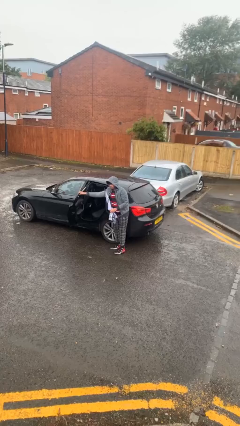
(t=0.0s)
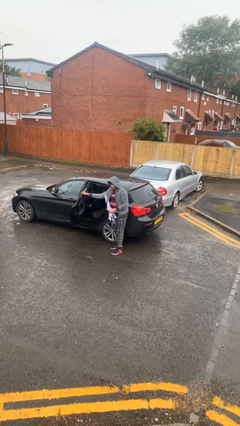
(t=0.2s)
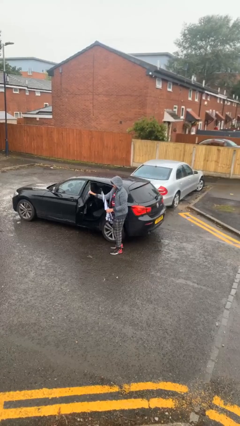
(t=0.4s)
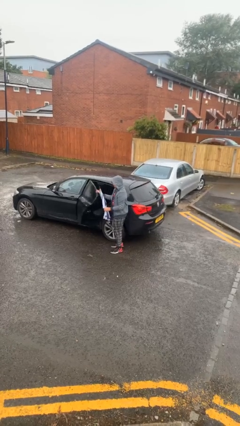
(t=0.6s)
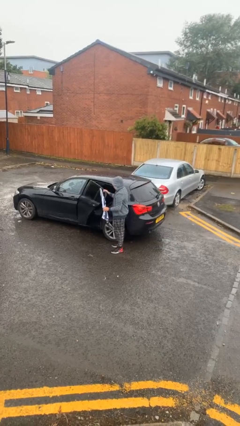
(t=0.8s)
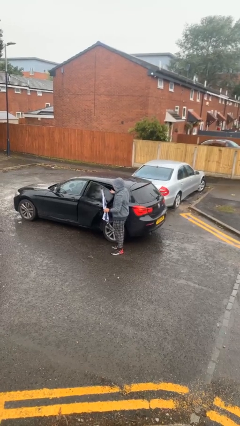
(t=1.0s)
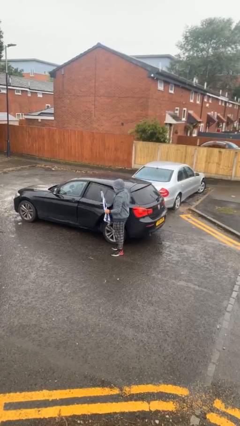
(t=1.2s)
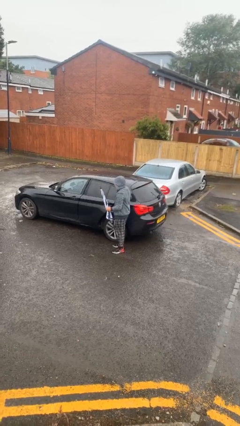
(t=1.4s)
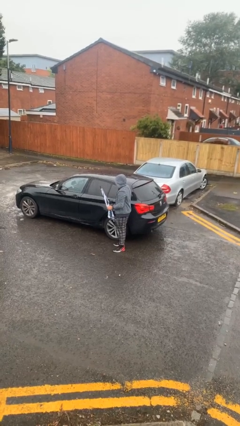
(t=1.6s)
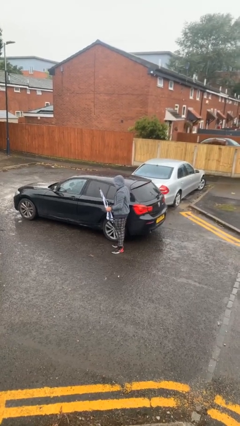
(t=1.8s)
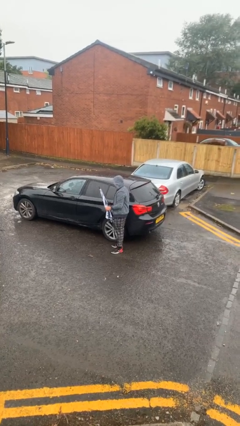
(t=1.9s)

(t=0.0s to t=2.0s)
person closes car door

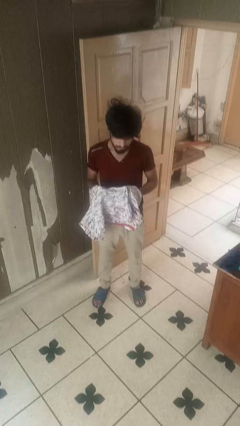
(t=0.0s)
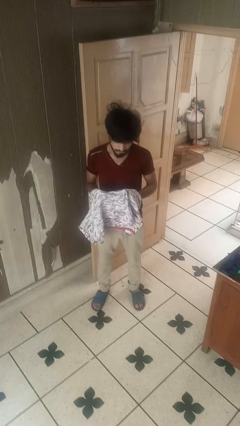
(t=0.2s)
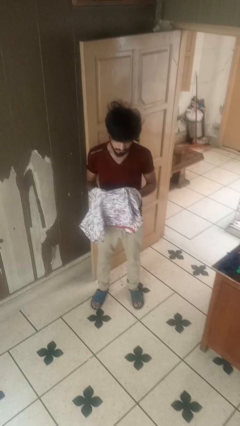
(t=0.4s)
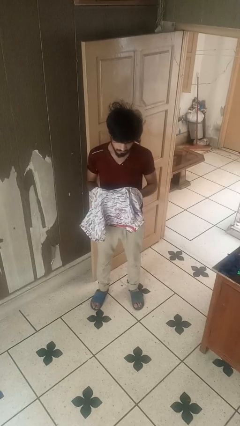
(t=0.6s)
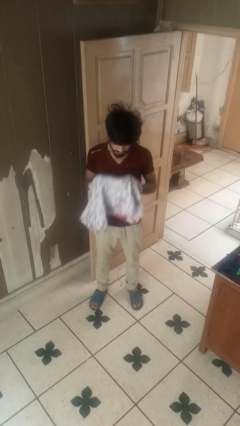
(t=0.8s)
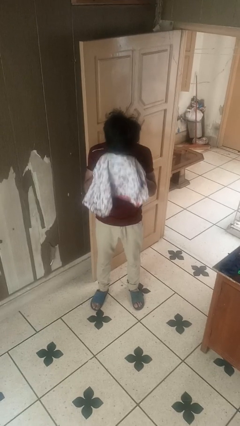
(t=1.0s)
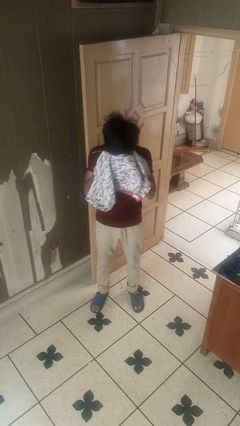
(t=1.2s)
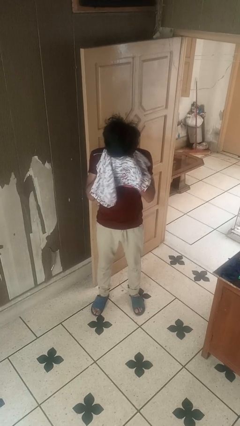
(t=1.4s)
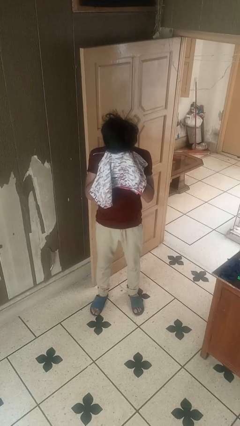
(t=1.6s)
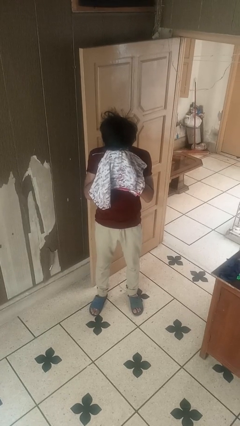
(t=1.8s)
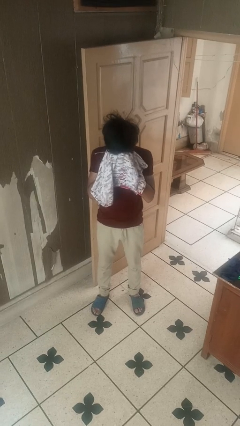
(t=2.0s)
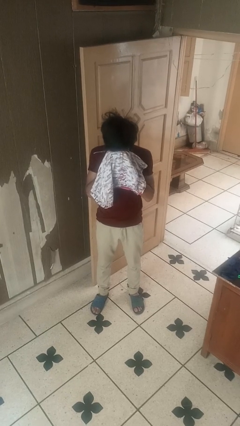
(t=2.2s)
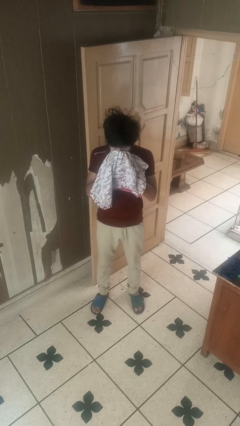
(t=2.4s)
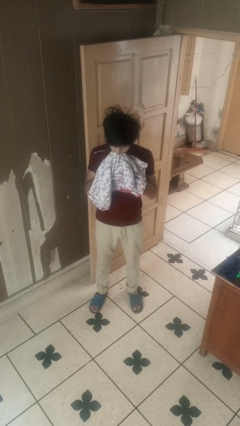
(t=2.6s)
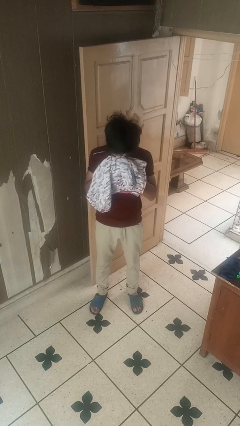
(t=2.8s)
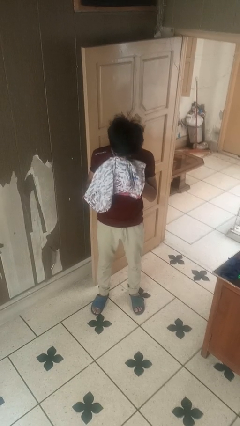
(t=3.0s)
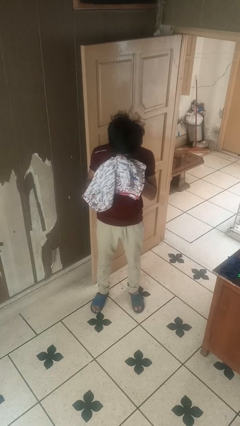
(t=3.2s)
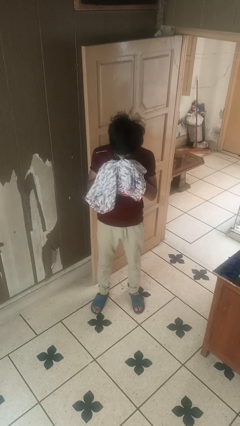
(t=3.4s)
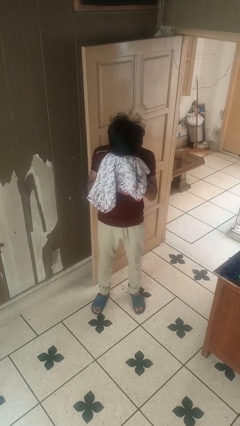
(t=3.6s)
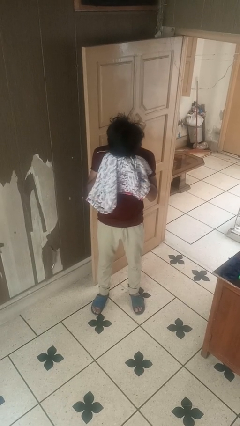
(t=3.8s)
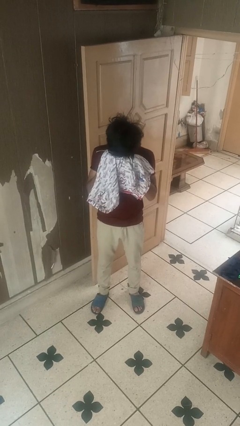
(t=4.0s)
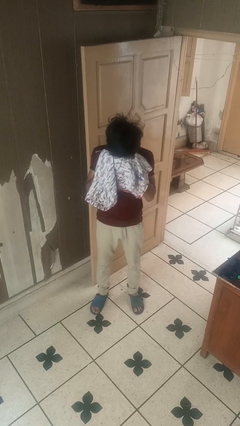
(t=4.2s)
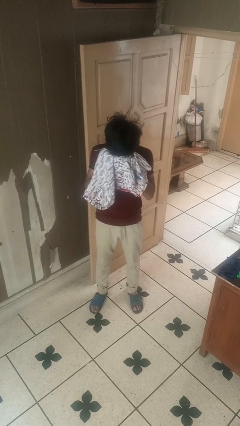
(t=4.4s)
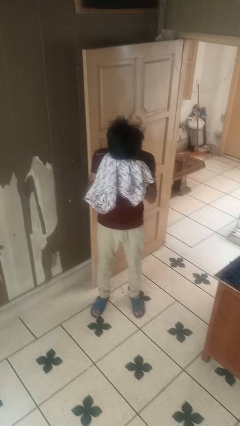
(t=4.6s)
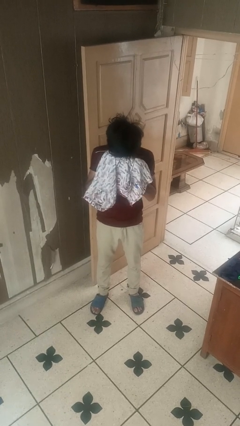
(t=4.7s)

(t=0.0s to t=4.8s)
person wipes mouth with napkin

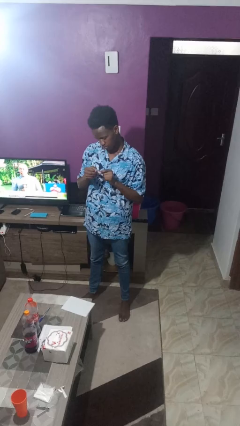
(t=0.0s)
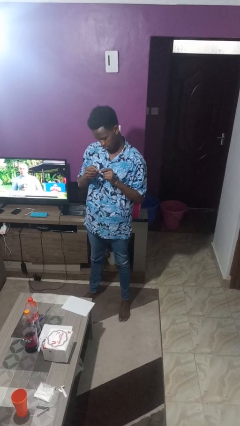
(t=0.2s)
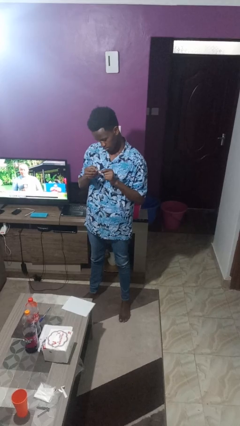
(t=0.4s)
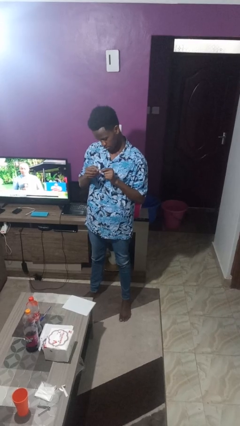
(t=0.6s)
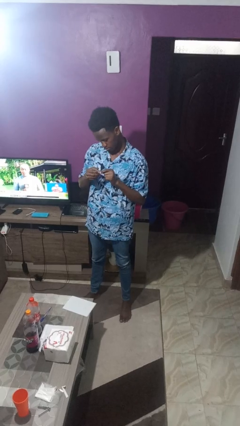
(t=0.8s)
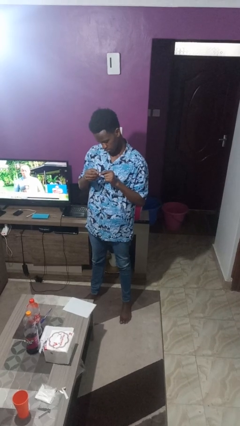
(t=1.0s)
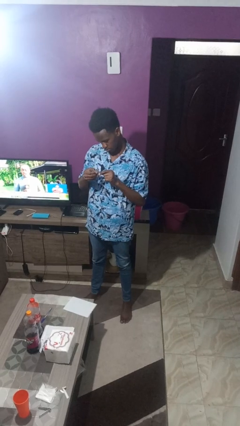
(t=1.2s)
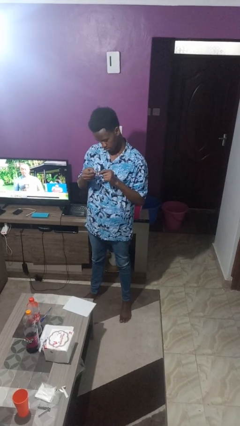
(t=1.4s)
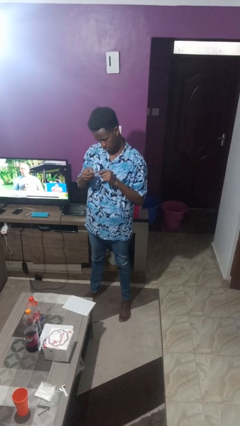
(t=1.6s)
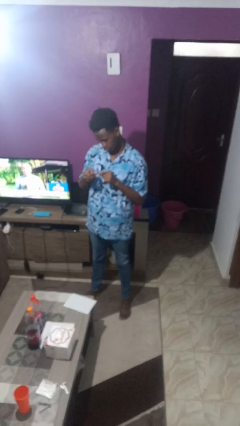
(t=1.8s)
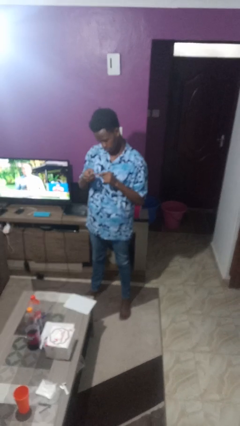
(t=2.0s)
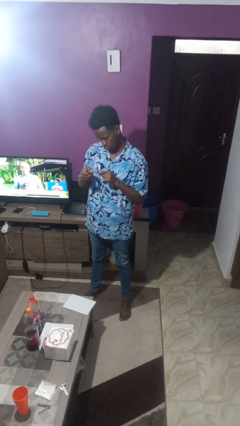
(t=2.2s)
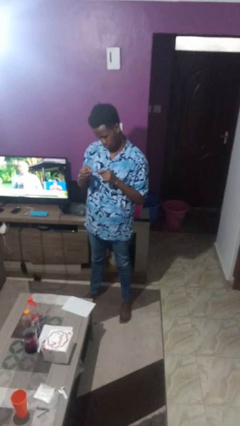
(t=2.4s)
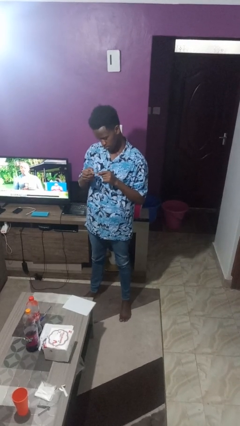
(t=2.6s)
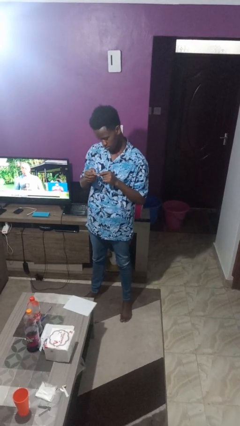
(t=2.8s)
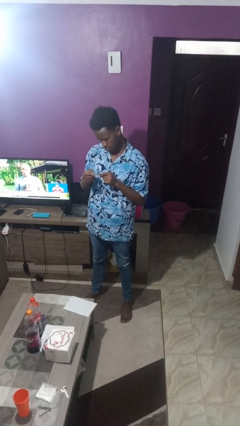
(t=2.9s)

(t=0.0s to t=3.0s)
person files fingernails

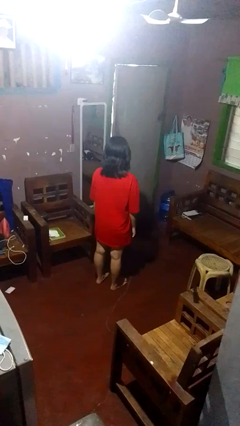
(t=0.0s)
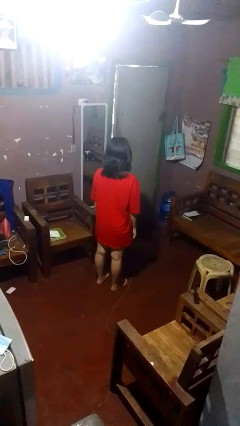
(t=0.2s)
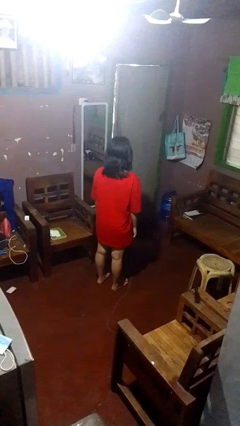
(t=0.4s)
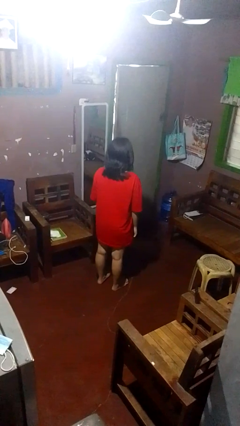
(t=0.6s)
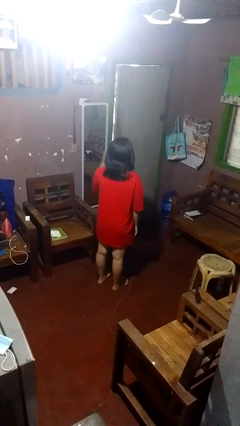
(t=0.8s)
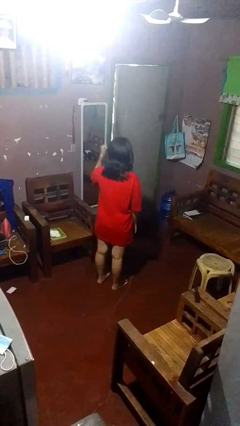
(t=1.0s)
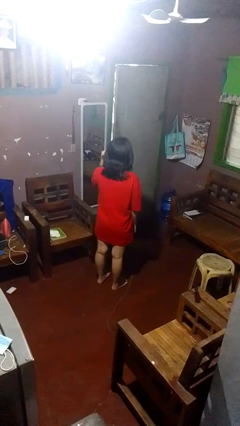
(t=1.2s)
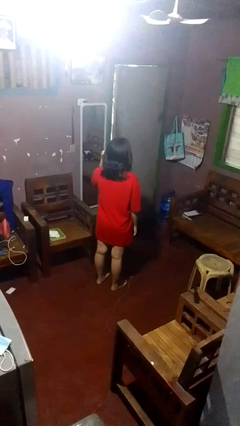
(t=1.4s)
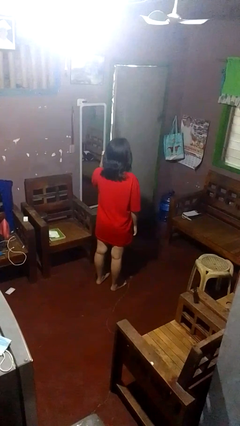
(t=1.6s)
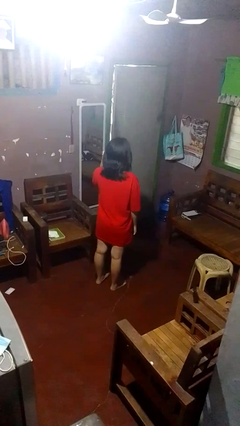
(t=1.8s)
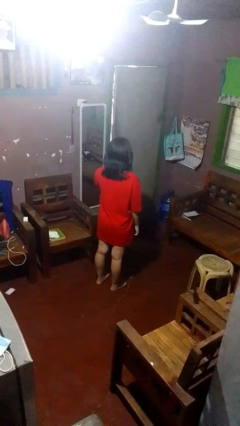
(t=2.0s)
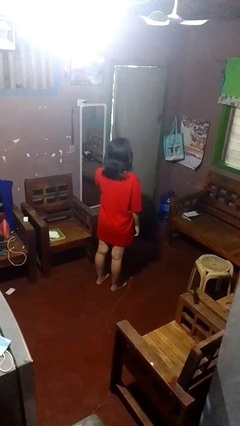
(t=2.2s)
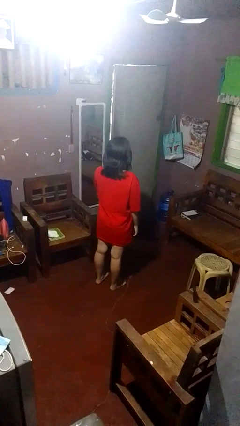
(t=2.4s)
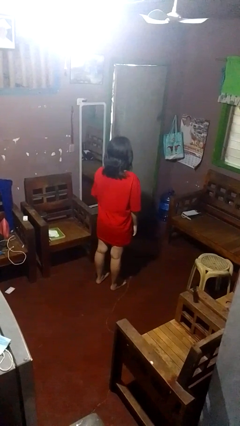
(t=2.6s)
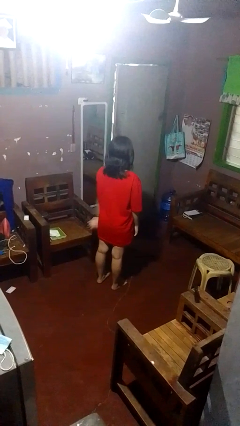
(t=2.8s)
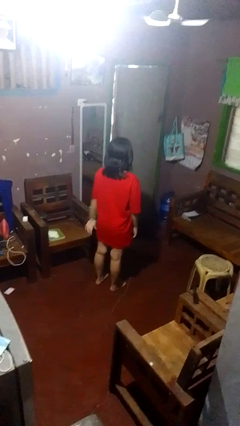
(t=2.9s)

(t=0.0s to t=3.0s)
person gestures behind me

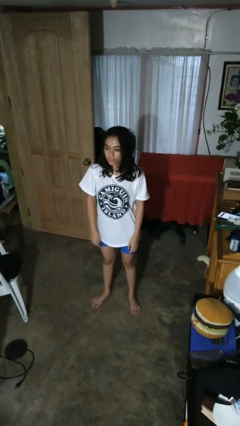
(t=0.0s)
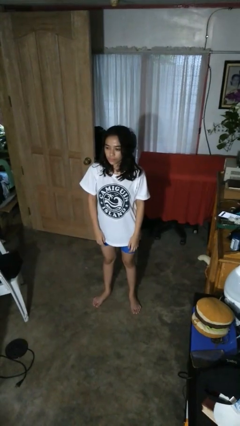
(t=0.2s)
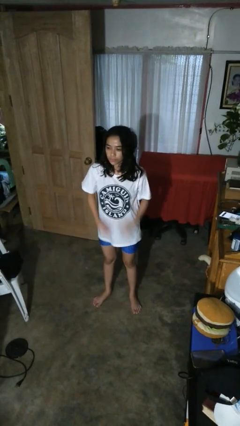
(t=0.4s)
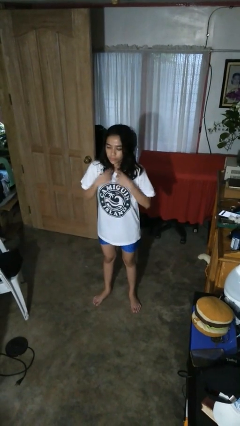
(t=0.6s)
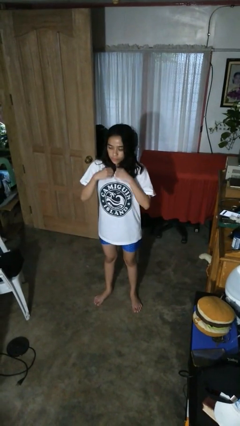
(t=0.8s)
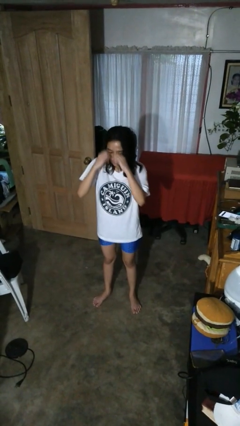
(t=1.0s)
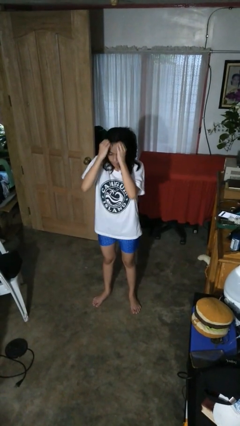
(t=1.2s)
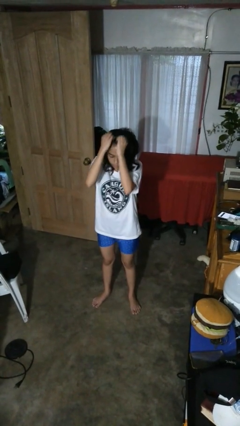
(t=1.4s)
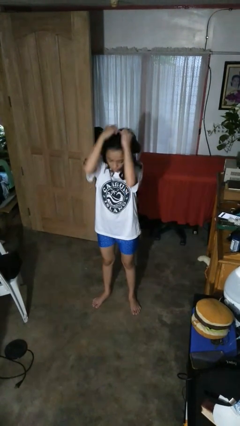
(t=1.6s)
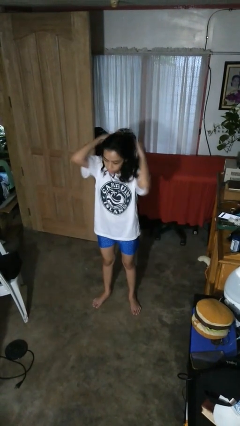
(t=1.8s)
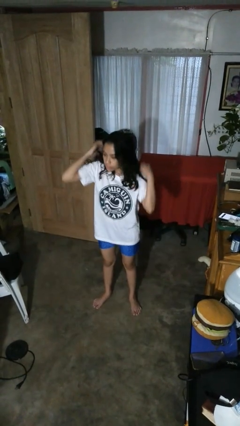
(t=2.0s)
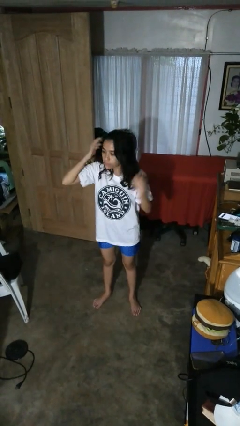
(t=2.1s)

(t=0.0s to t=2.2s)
person takes off necklace

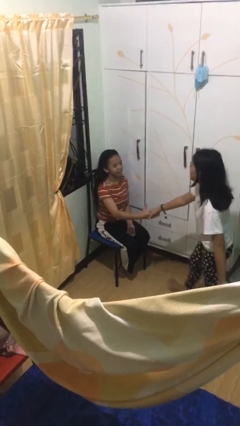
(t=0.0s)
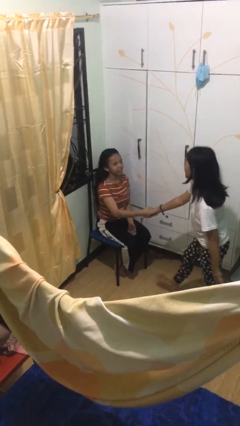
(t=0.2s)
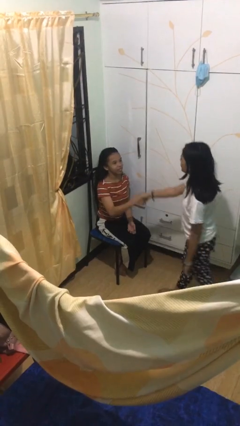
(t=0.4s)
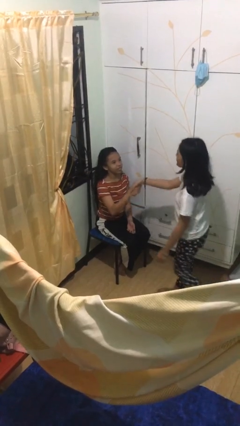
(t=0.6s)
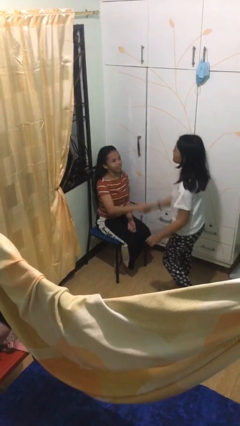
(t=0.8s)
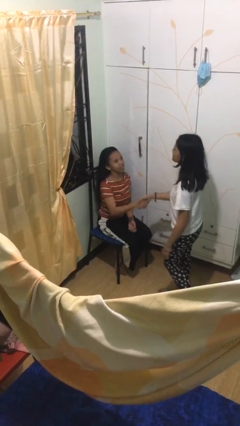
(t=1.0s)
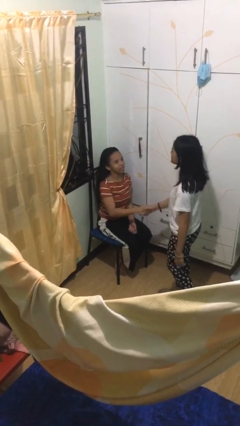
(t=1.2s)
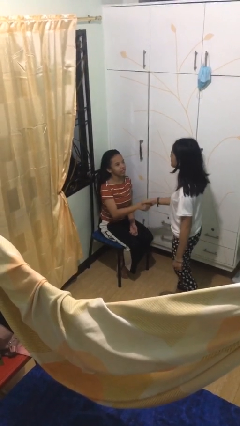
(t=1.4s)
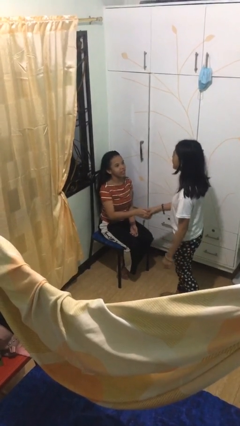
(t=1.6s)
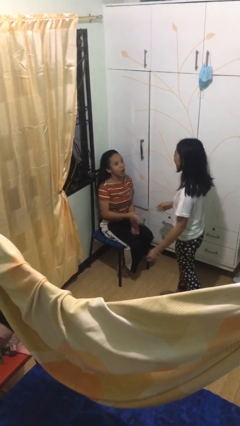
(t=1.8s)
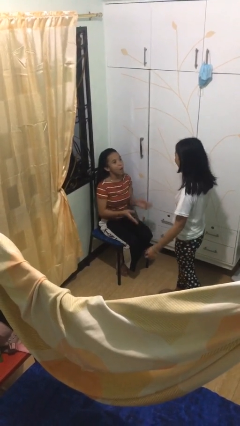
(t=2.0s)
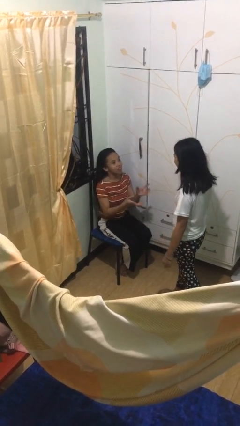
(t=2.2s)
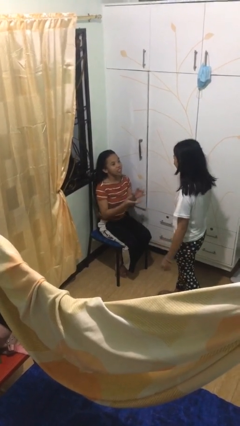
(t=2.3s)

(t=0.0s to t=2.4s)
person shakes hand
